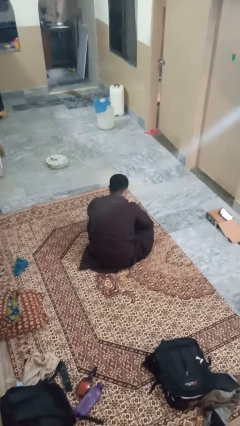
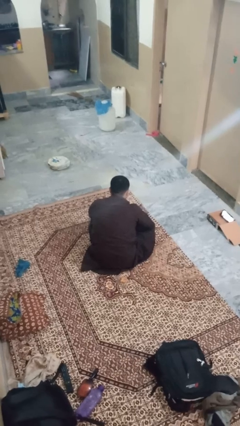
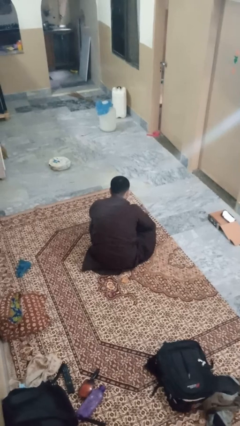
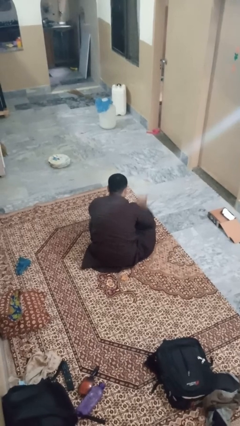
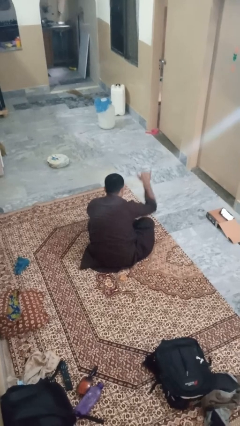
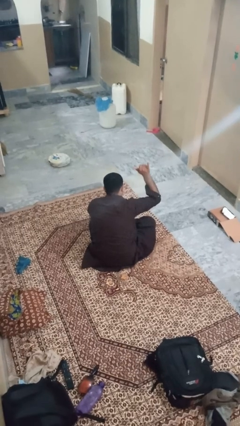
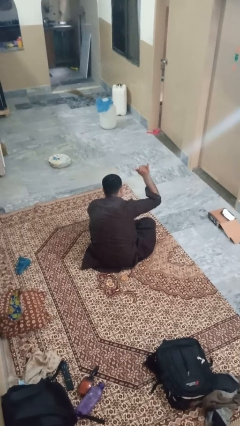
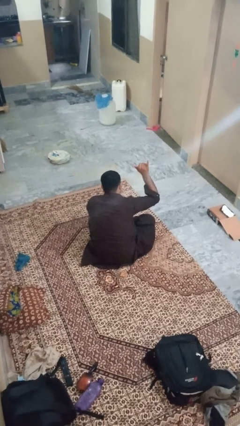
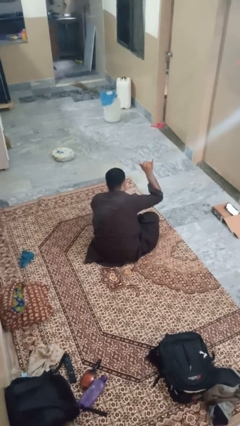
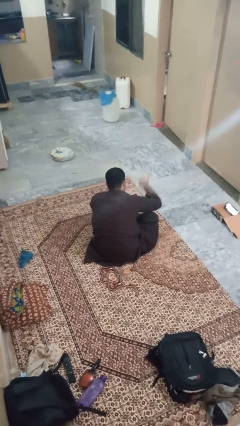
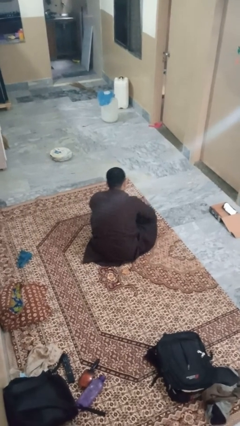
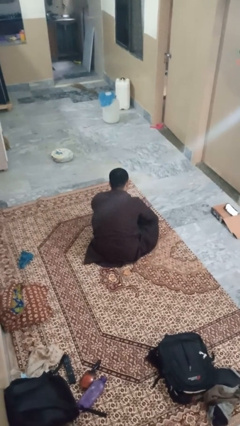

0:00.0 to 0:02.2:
person gestures hang loose

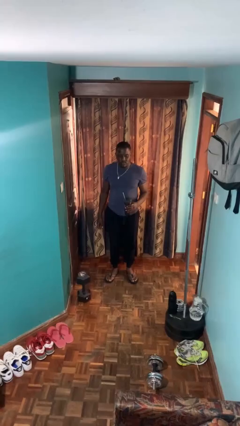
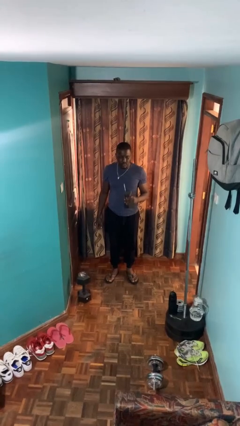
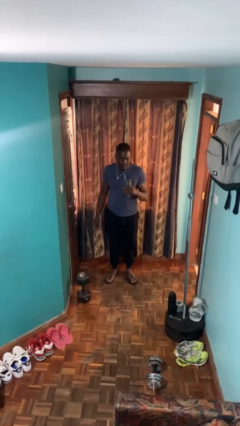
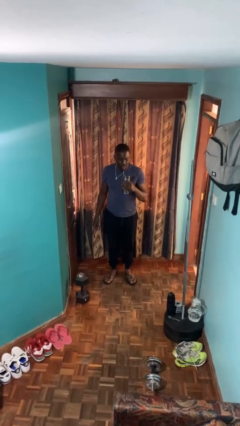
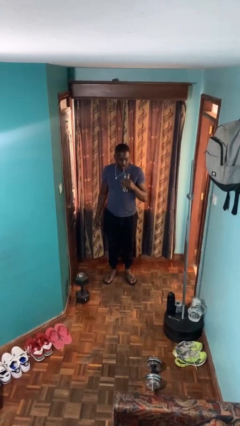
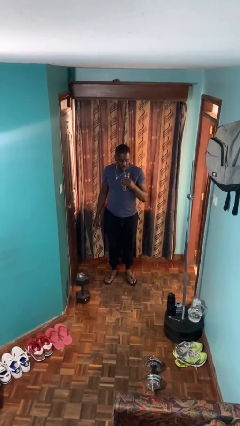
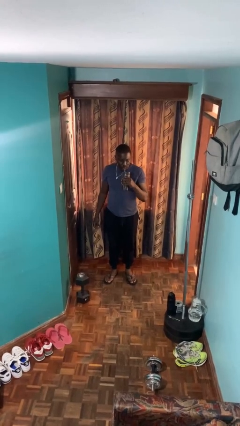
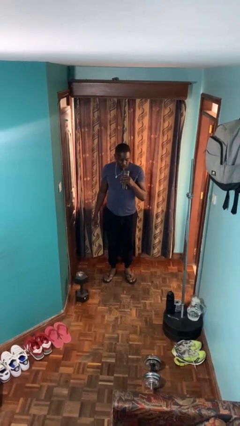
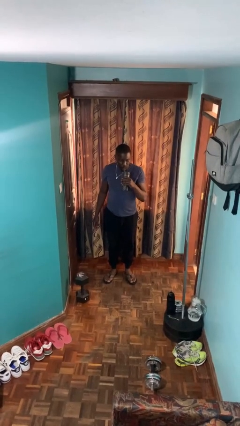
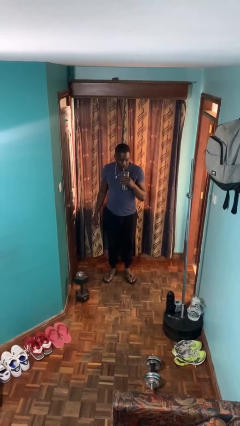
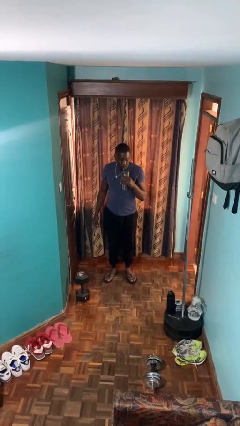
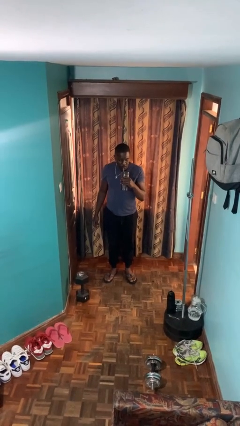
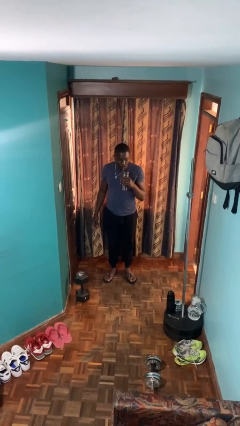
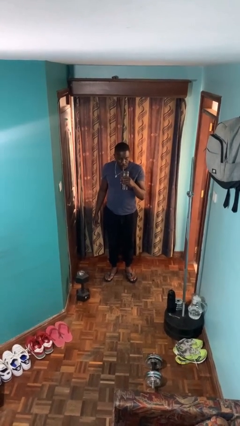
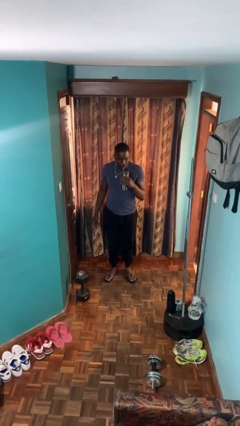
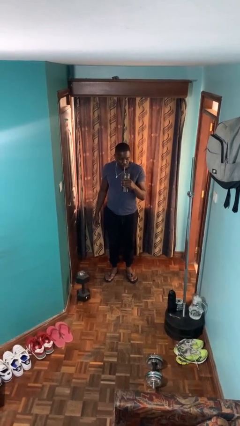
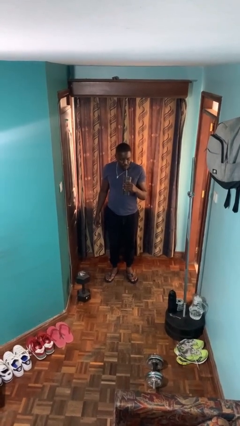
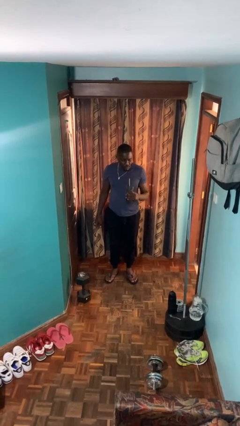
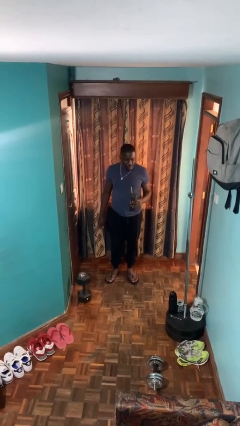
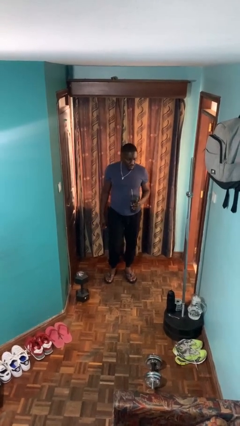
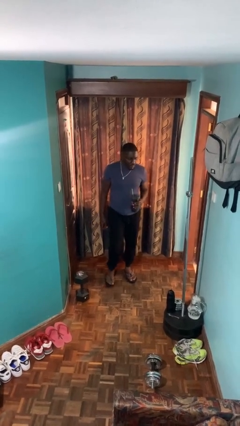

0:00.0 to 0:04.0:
person drinks from straw

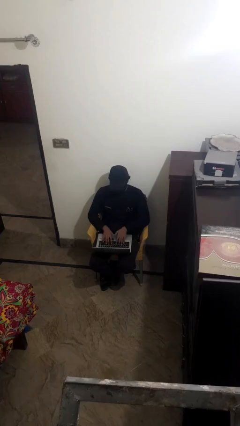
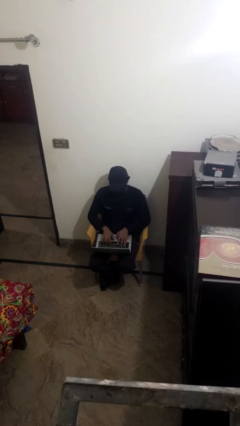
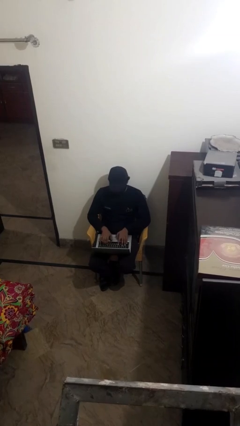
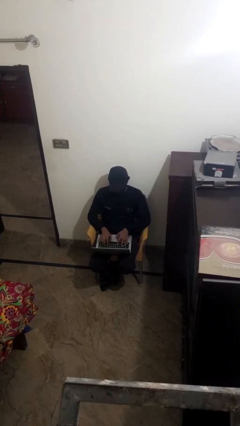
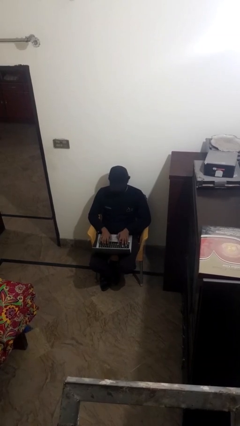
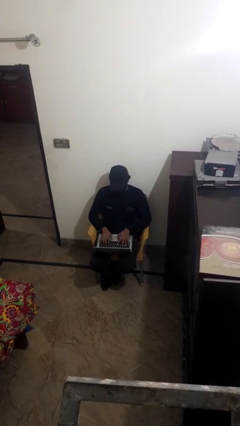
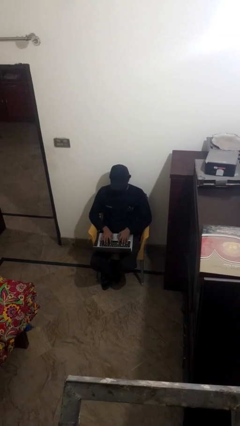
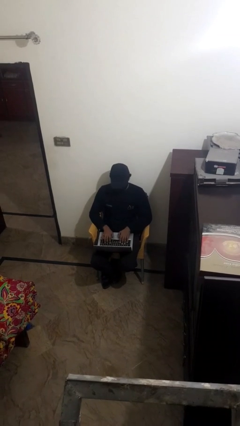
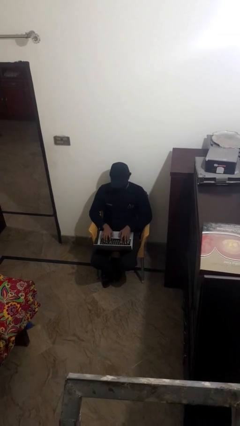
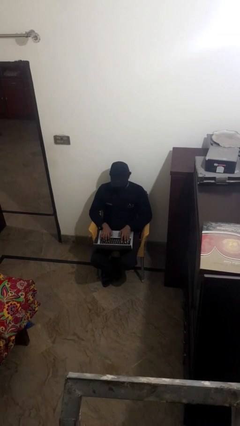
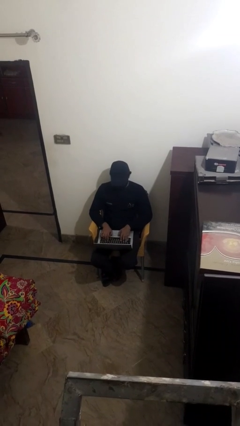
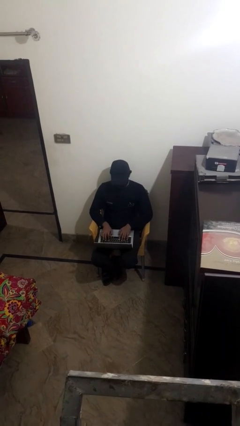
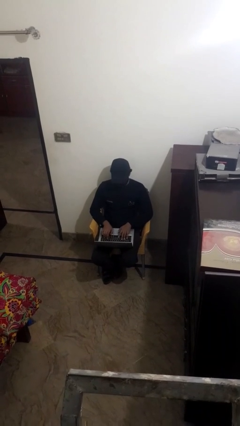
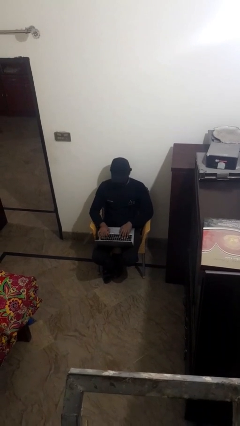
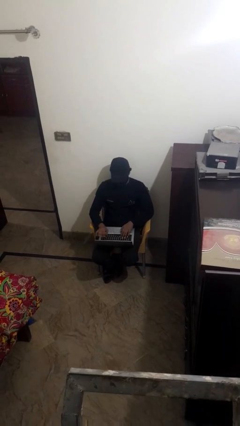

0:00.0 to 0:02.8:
person interacts with laptop

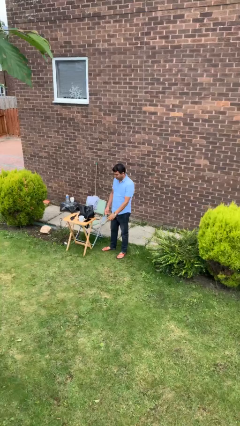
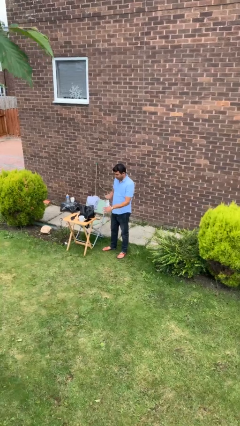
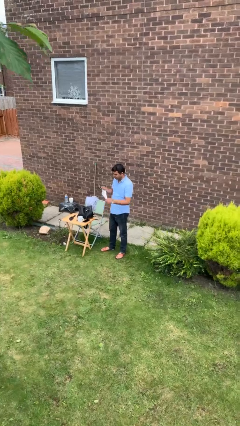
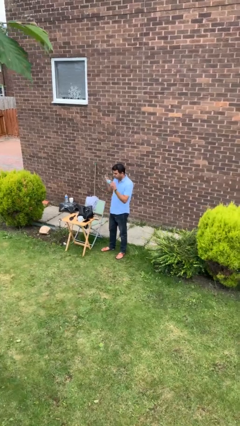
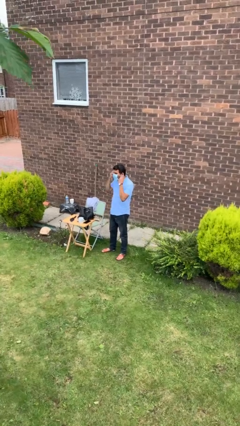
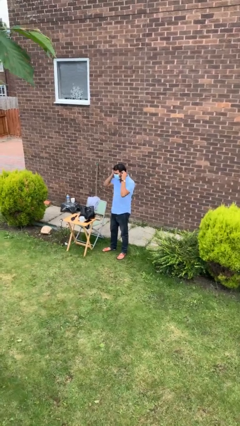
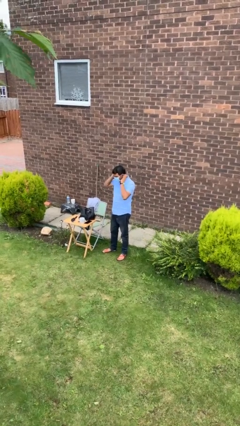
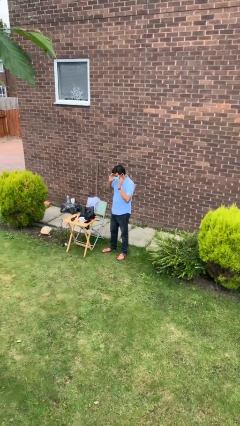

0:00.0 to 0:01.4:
person puts on facemask

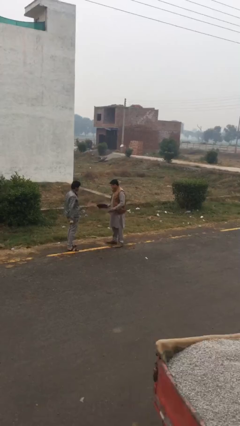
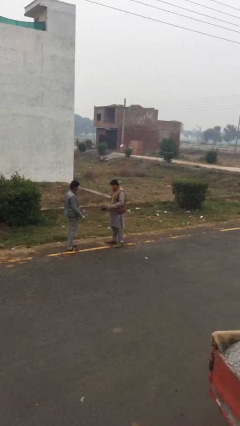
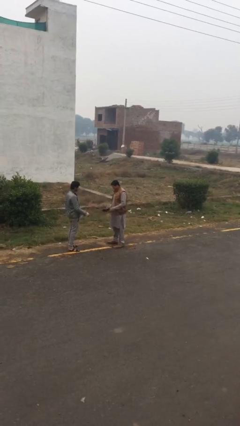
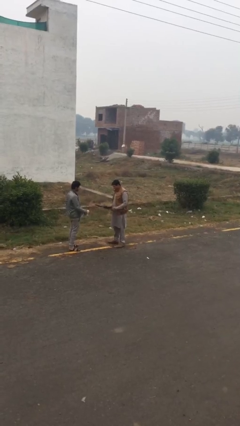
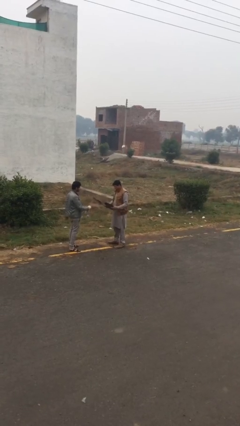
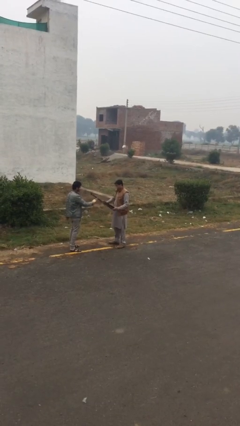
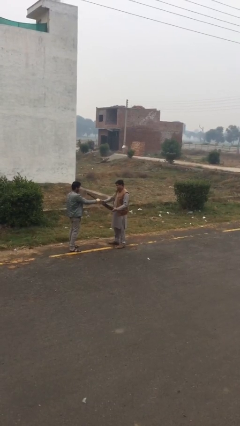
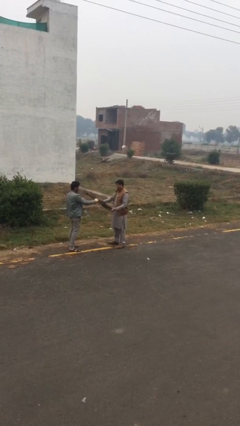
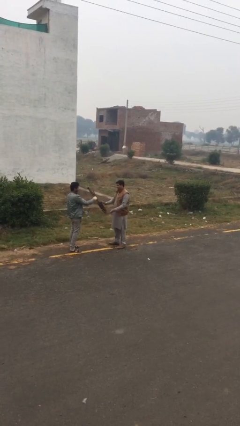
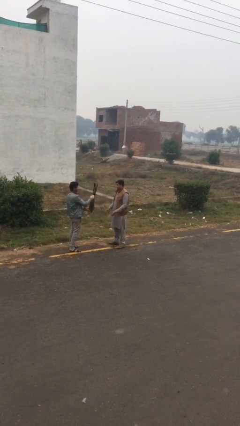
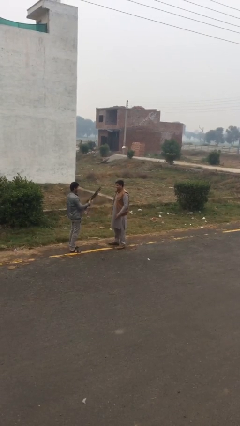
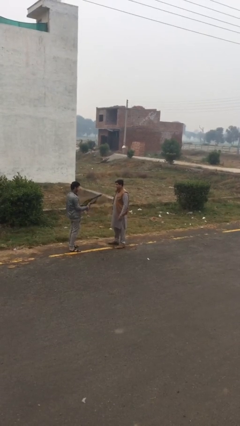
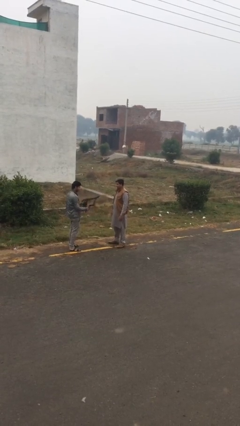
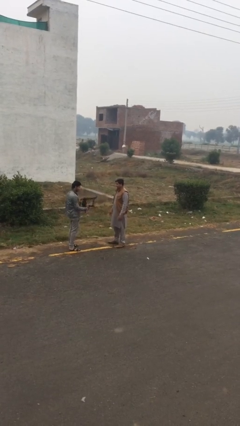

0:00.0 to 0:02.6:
person transfers object to person

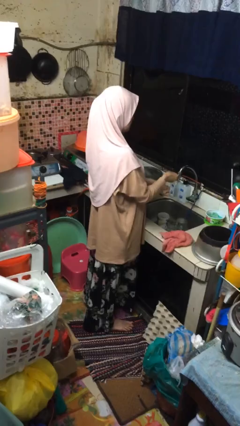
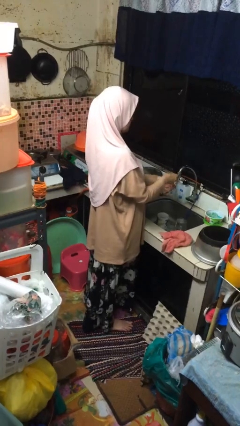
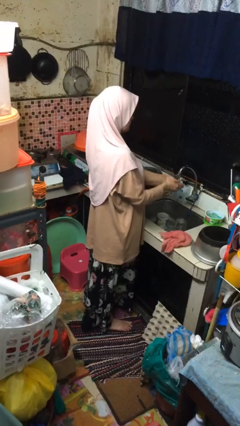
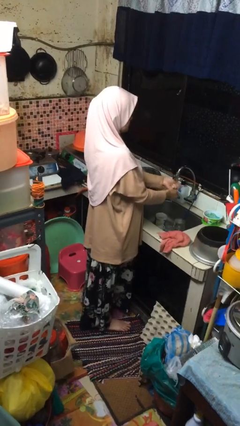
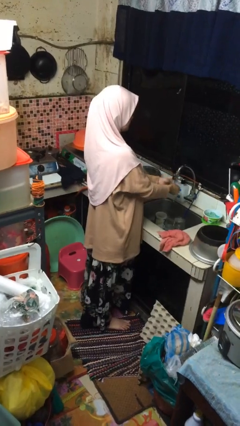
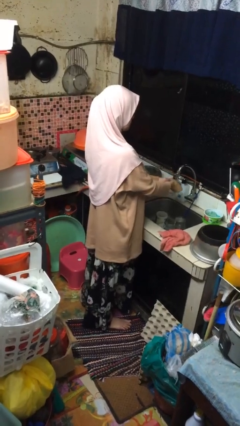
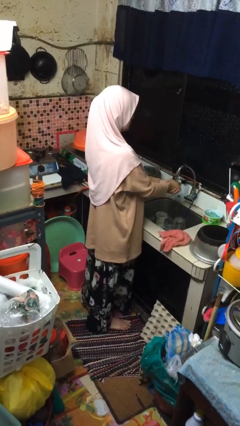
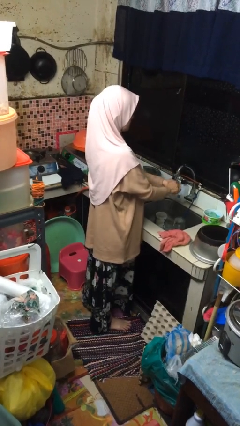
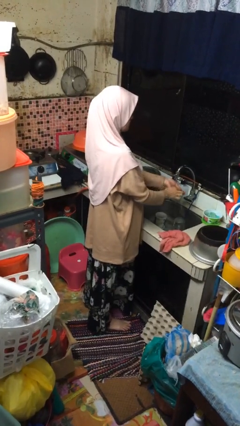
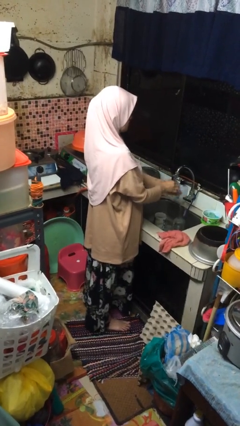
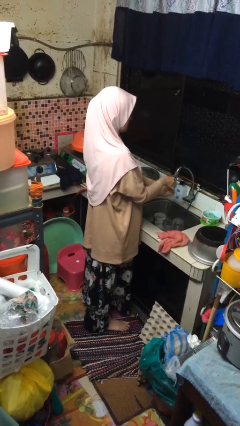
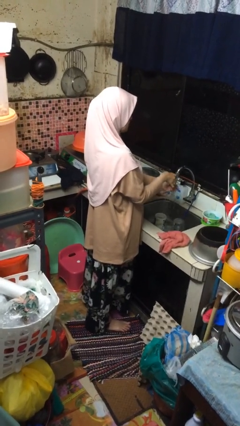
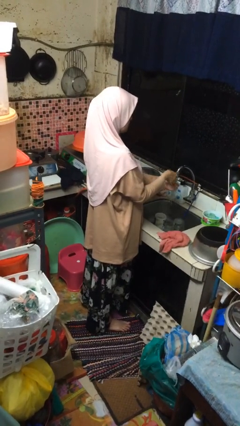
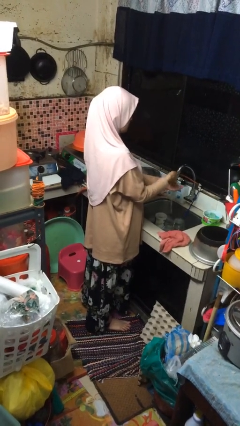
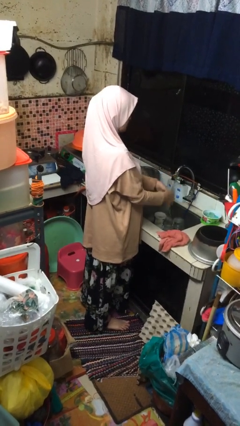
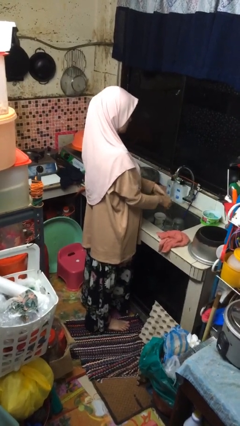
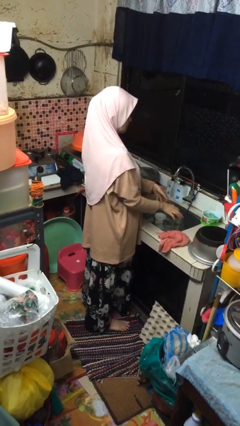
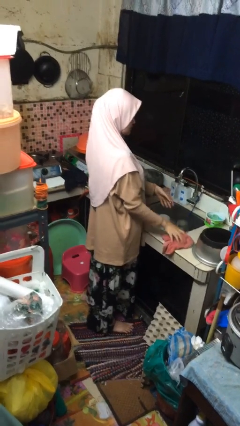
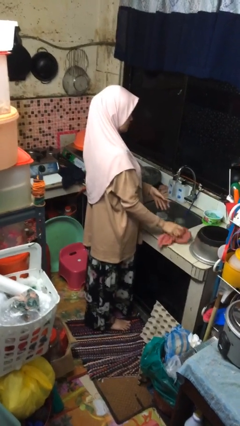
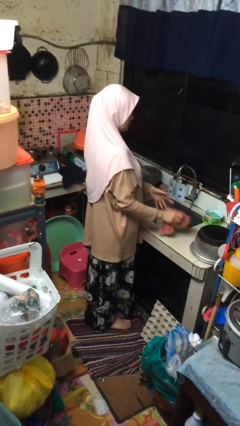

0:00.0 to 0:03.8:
person washes hands

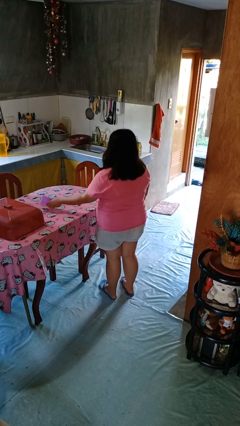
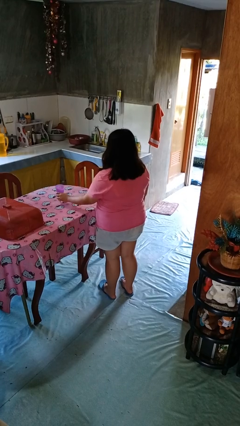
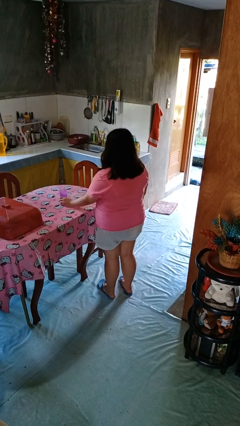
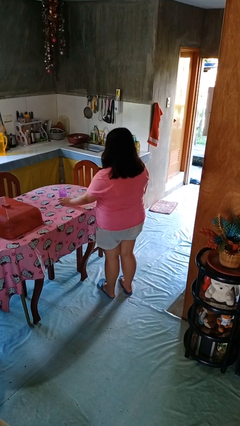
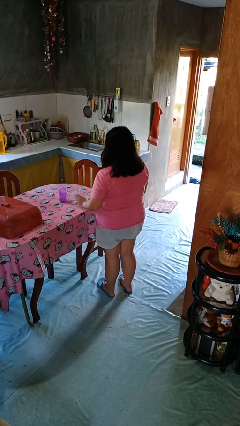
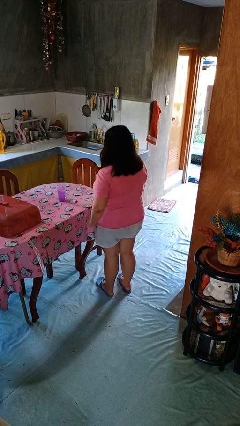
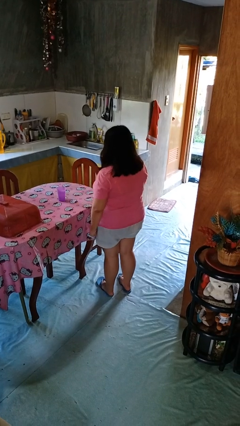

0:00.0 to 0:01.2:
person sets upright glass
